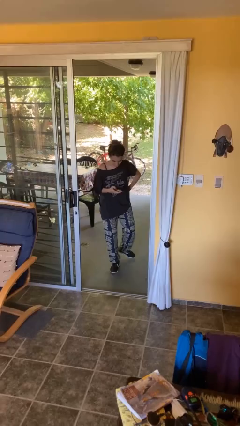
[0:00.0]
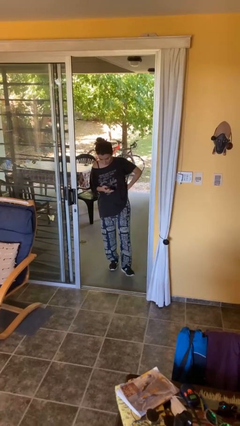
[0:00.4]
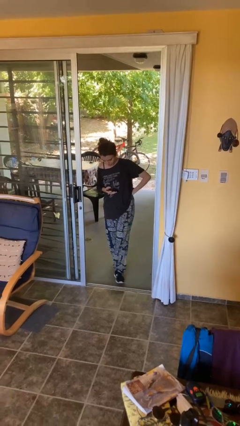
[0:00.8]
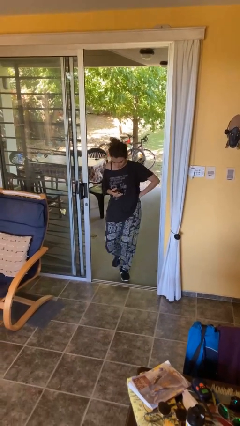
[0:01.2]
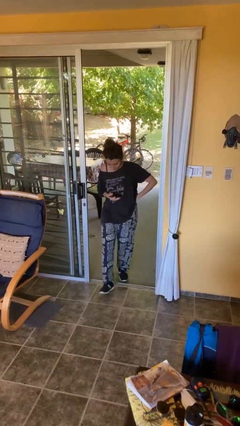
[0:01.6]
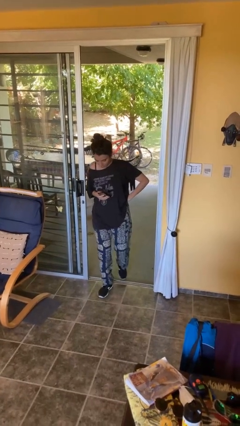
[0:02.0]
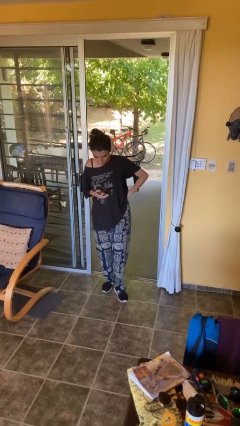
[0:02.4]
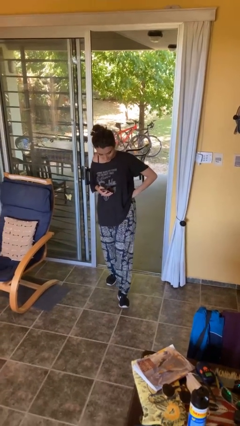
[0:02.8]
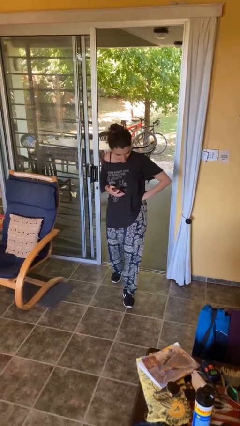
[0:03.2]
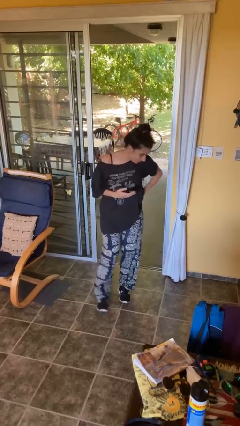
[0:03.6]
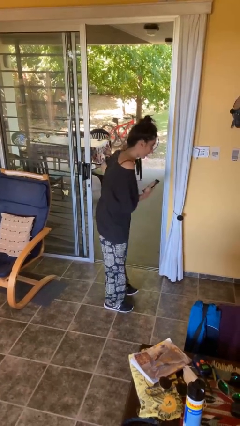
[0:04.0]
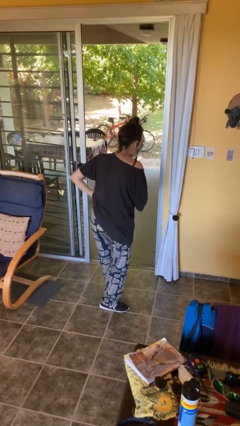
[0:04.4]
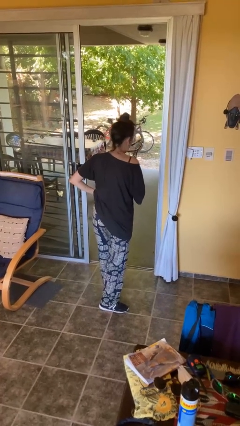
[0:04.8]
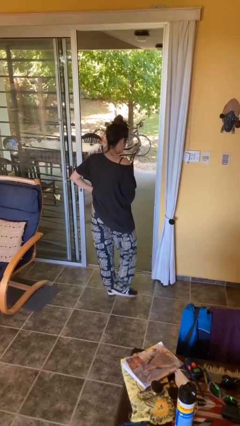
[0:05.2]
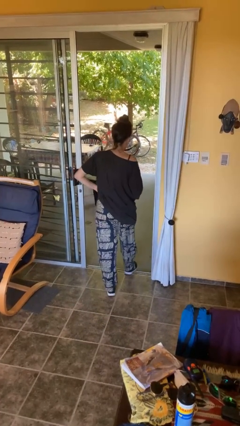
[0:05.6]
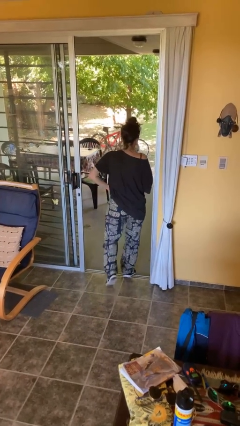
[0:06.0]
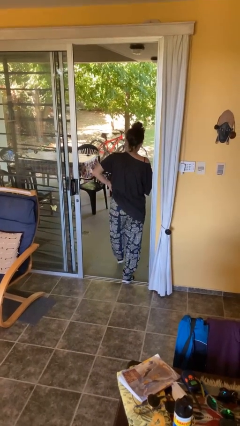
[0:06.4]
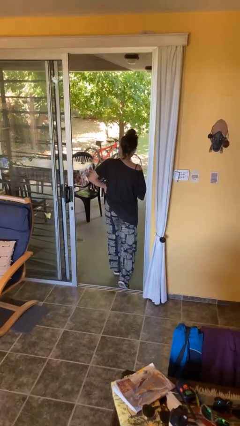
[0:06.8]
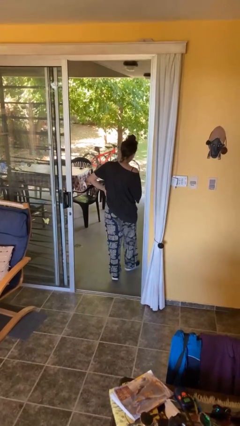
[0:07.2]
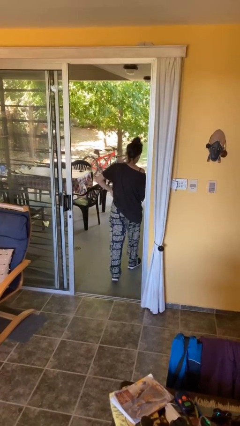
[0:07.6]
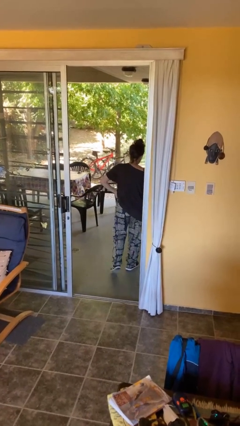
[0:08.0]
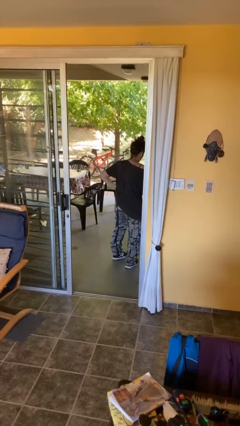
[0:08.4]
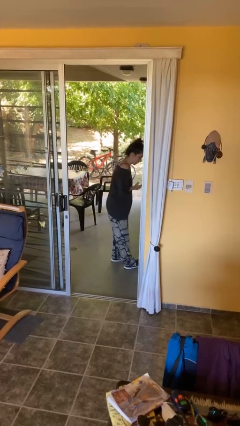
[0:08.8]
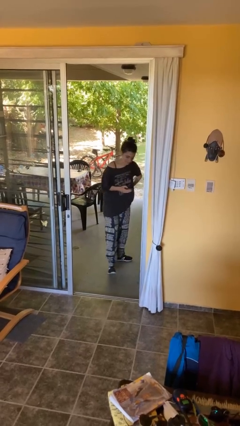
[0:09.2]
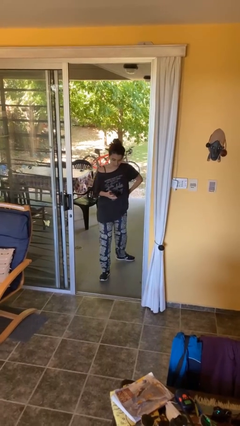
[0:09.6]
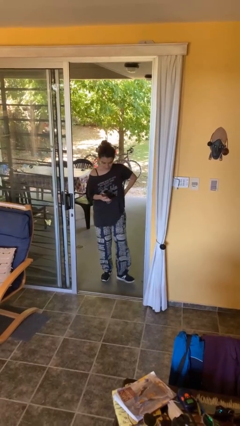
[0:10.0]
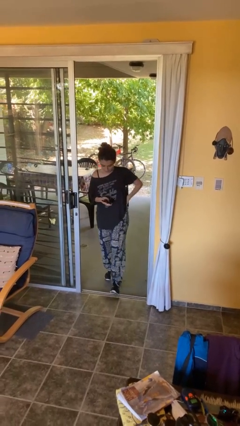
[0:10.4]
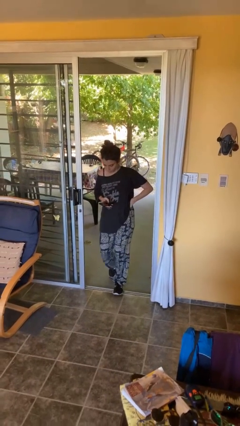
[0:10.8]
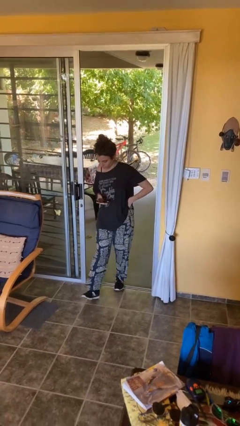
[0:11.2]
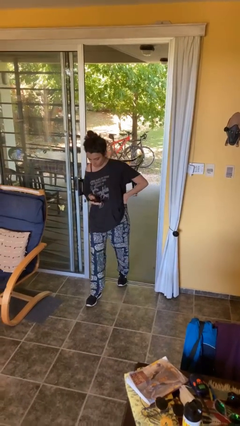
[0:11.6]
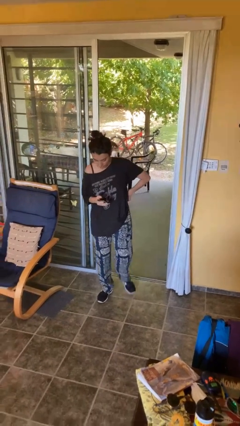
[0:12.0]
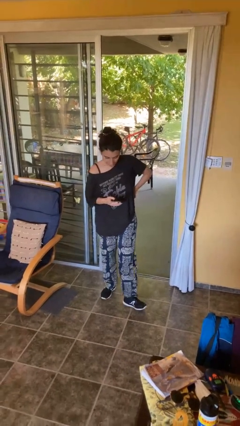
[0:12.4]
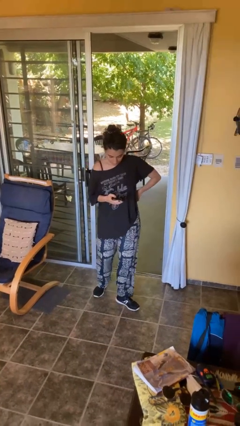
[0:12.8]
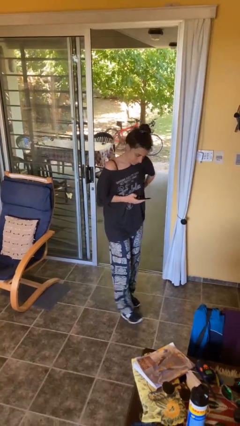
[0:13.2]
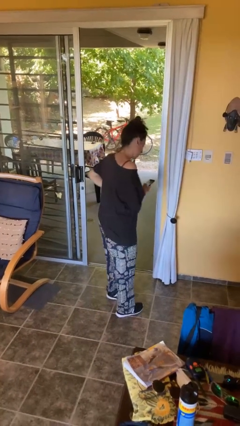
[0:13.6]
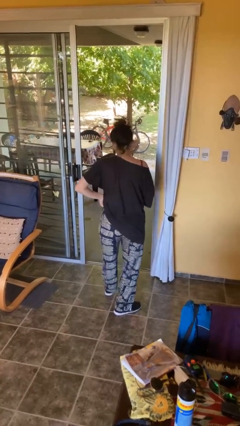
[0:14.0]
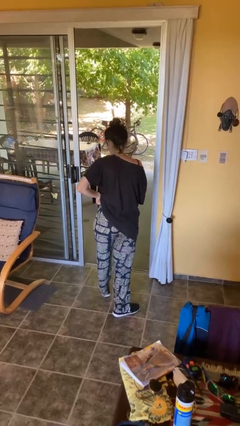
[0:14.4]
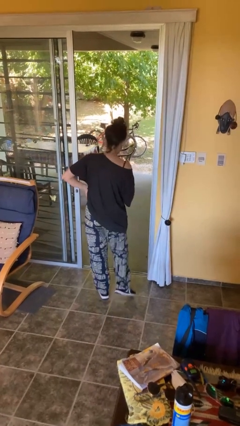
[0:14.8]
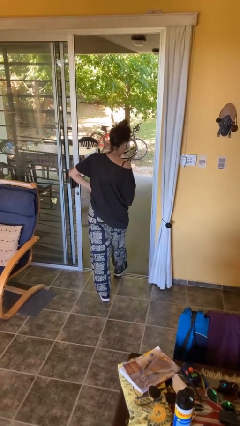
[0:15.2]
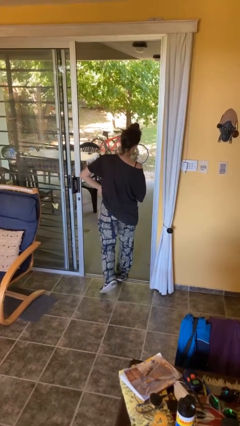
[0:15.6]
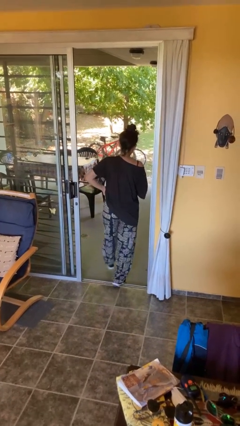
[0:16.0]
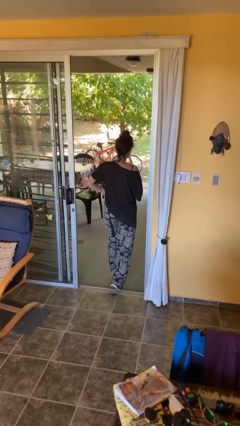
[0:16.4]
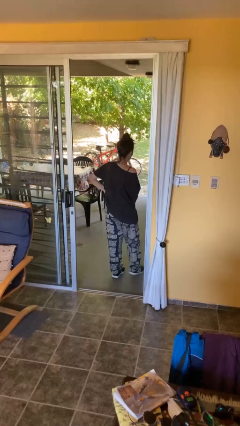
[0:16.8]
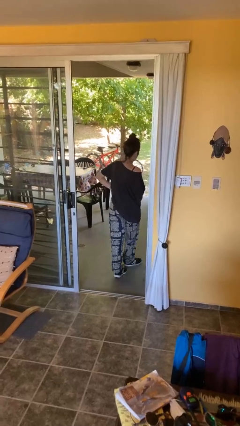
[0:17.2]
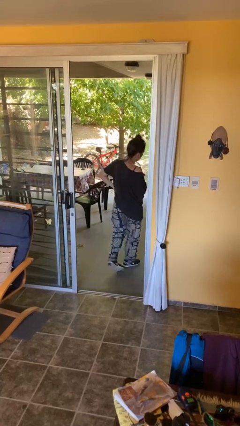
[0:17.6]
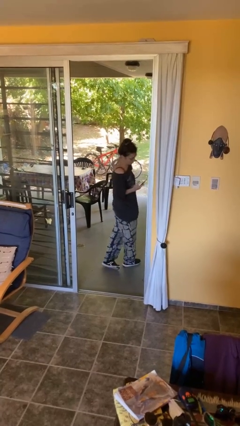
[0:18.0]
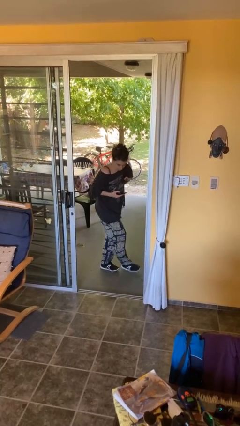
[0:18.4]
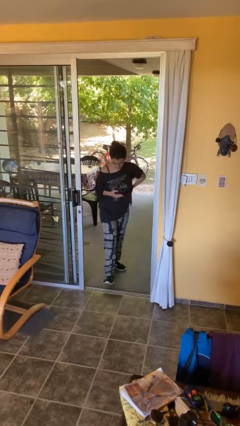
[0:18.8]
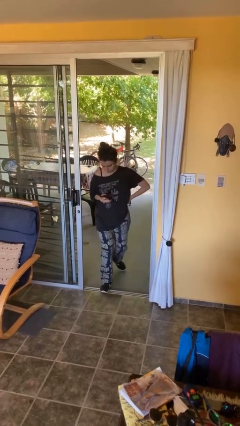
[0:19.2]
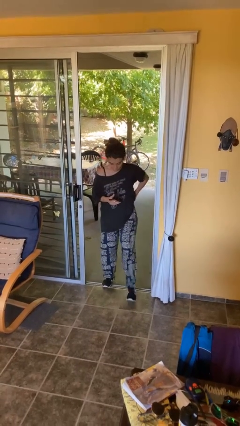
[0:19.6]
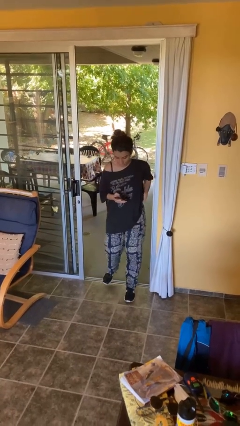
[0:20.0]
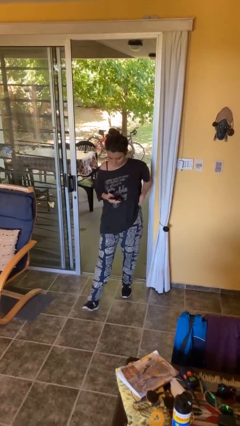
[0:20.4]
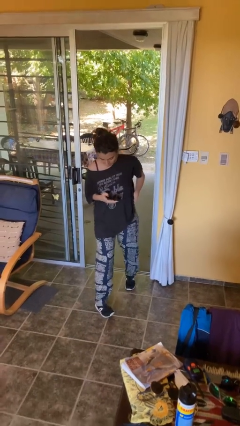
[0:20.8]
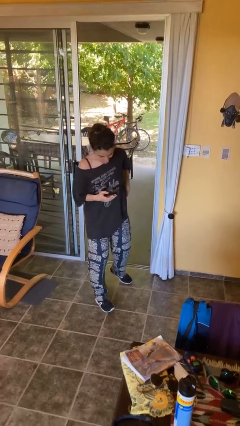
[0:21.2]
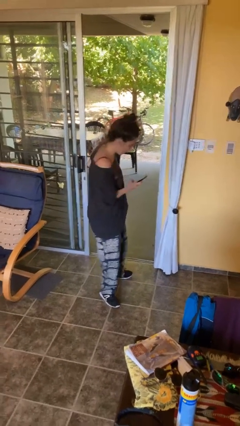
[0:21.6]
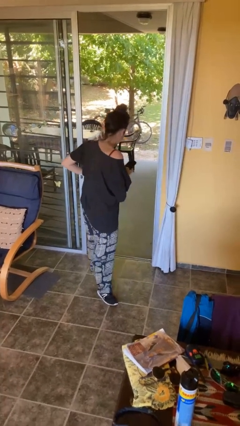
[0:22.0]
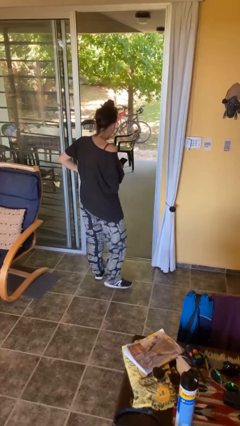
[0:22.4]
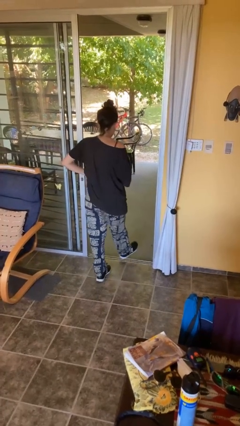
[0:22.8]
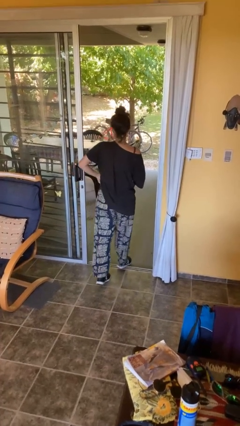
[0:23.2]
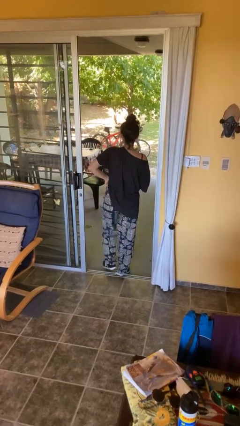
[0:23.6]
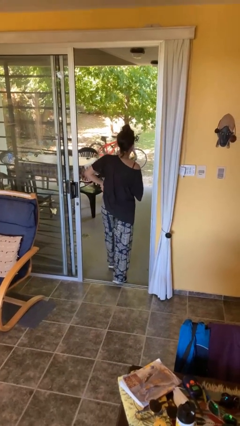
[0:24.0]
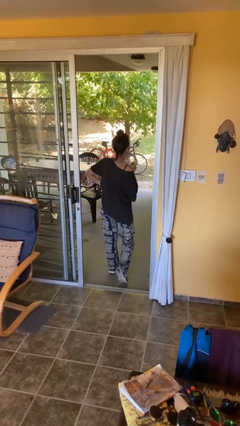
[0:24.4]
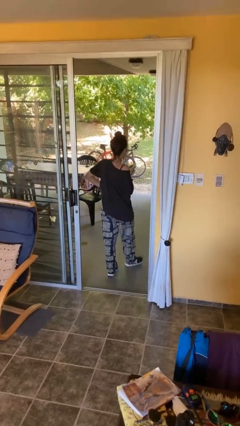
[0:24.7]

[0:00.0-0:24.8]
person texts on phone

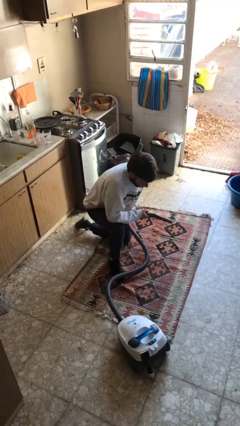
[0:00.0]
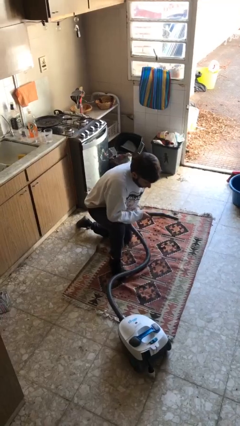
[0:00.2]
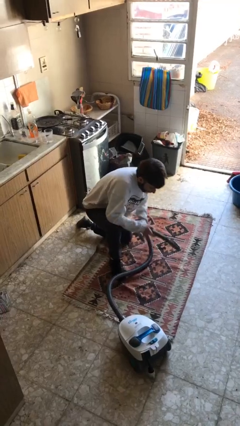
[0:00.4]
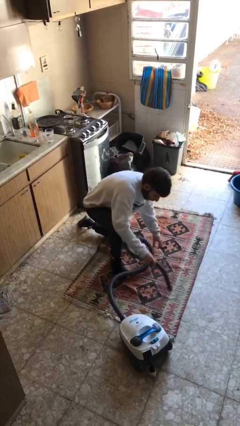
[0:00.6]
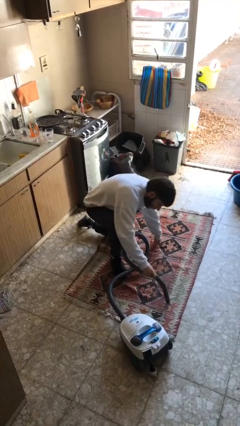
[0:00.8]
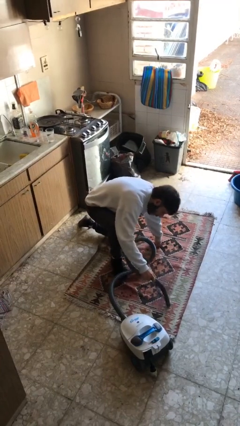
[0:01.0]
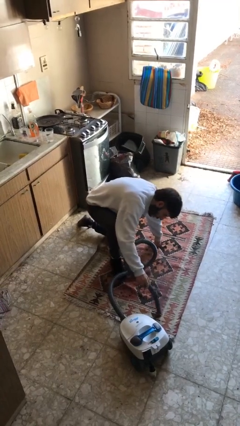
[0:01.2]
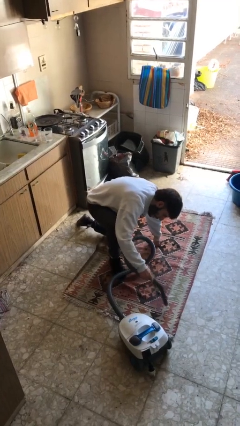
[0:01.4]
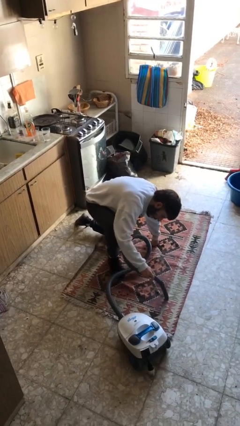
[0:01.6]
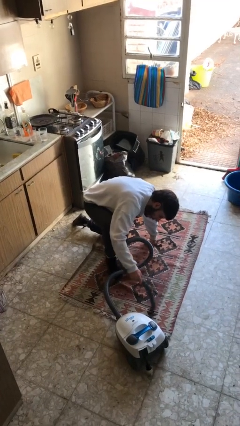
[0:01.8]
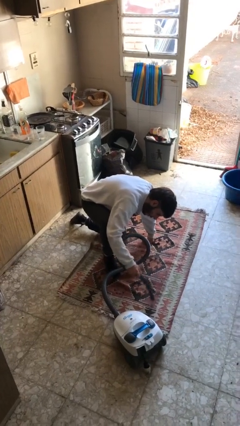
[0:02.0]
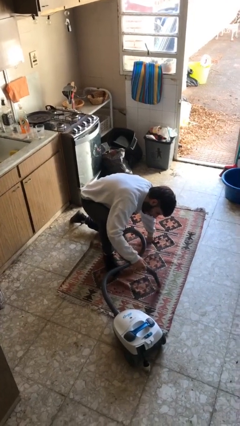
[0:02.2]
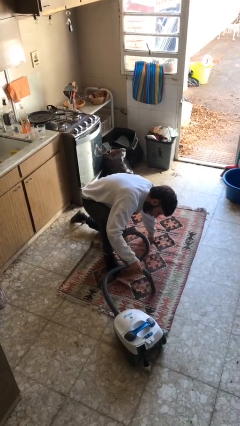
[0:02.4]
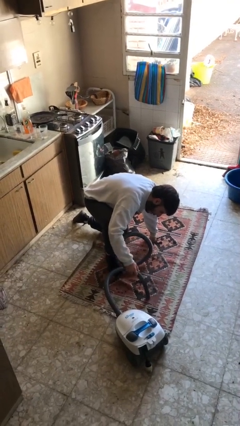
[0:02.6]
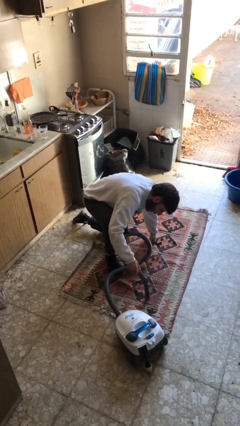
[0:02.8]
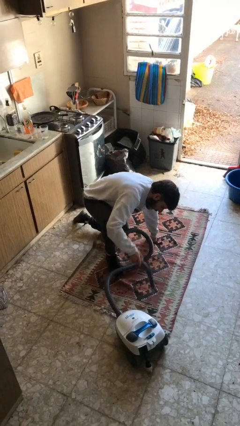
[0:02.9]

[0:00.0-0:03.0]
person vacuums carpet

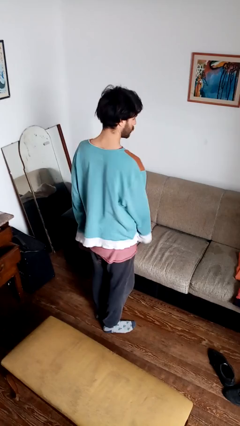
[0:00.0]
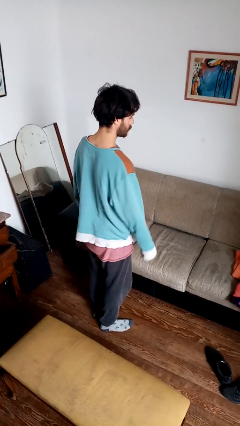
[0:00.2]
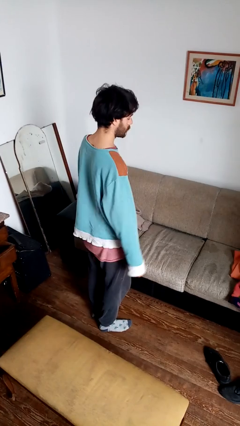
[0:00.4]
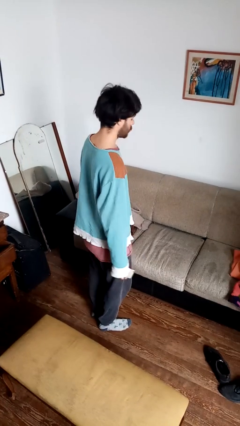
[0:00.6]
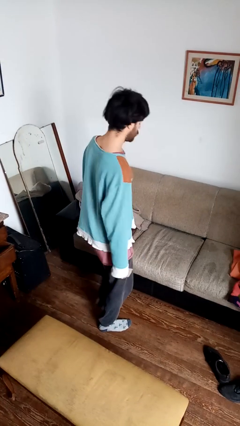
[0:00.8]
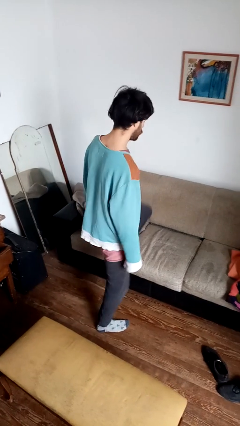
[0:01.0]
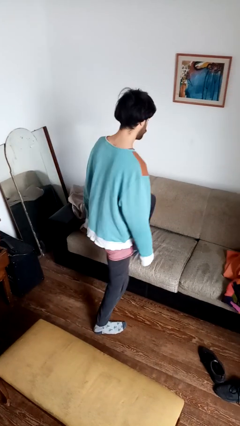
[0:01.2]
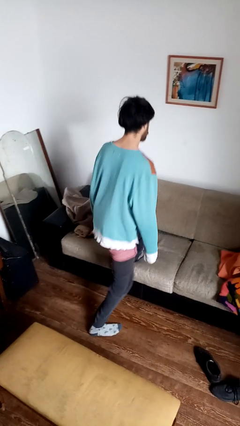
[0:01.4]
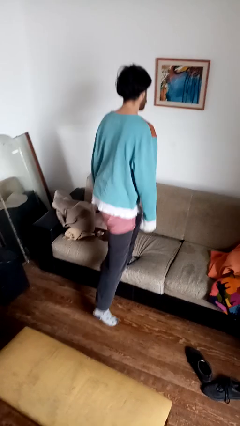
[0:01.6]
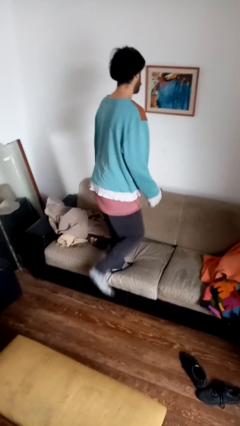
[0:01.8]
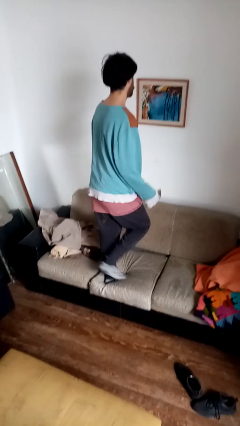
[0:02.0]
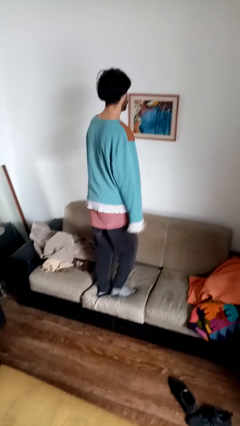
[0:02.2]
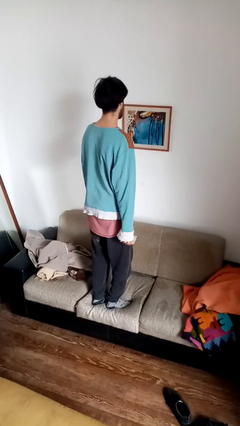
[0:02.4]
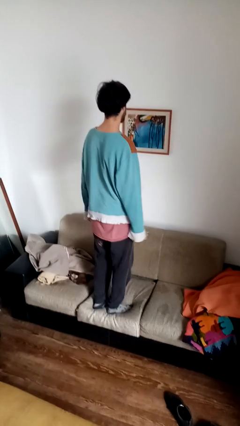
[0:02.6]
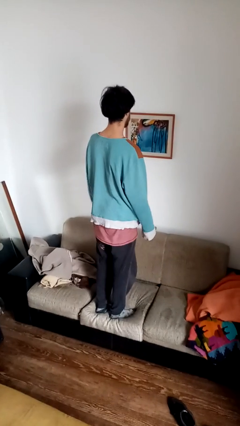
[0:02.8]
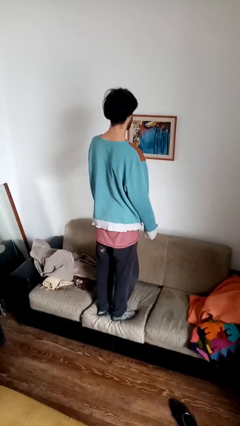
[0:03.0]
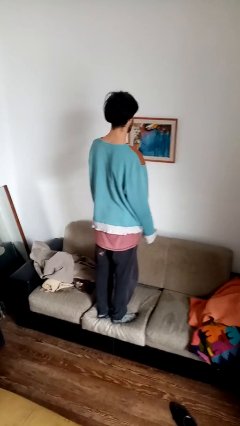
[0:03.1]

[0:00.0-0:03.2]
person climbs on couch
